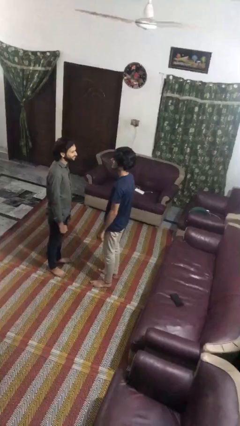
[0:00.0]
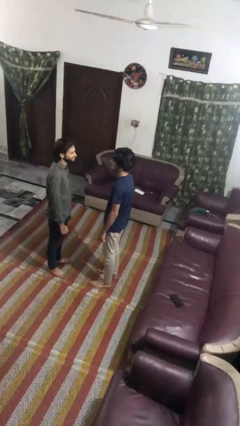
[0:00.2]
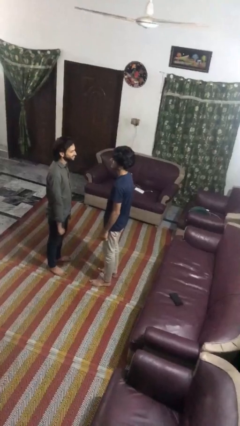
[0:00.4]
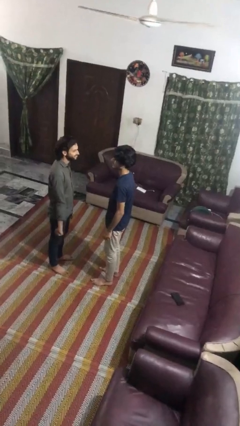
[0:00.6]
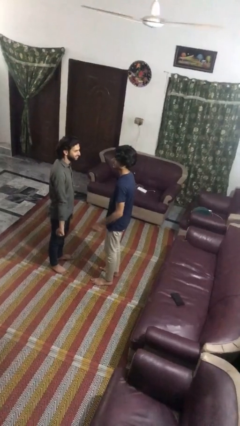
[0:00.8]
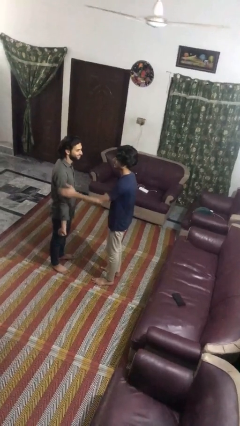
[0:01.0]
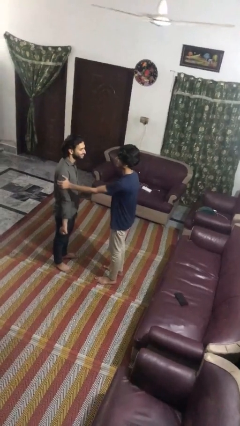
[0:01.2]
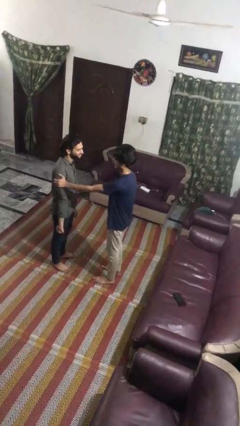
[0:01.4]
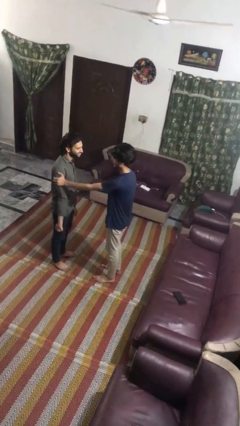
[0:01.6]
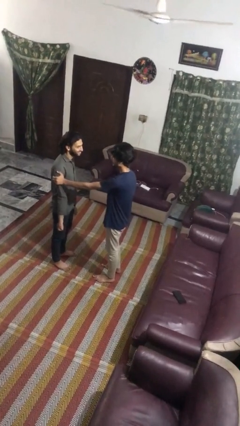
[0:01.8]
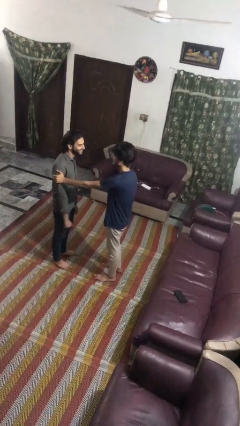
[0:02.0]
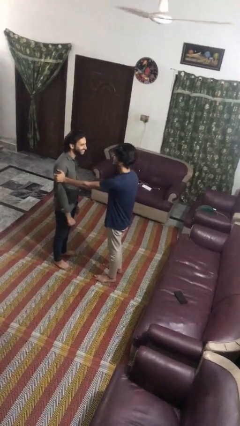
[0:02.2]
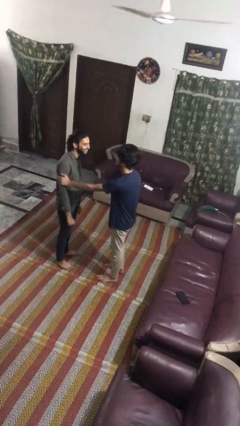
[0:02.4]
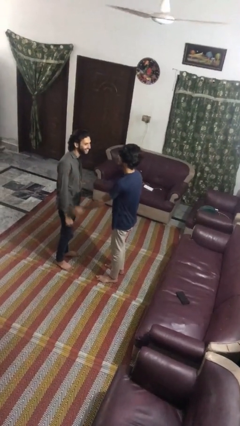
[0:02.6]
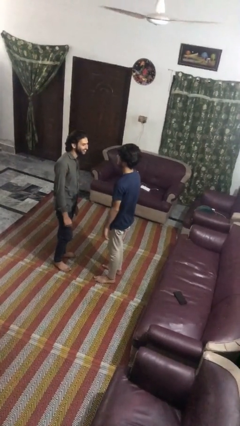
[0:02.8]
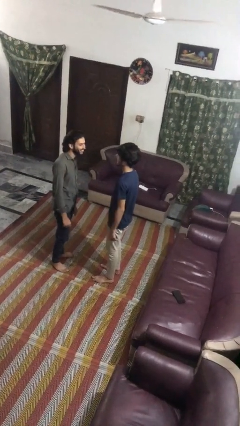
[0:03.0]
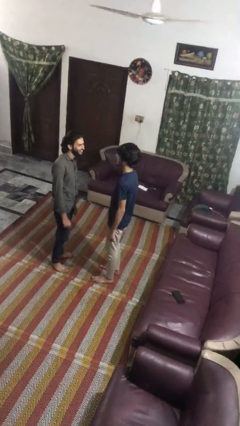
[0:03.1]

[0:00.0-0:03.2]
person grabs person by bicep

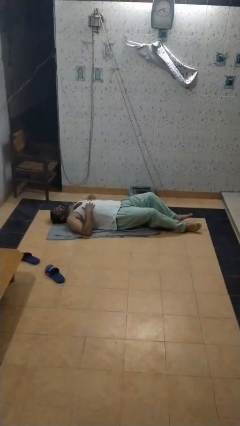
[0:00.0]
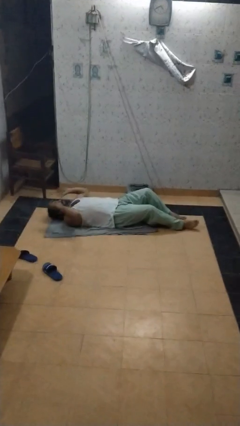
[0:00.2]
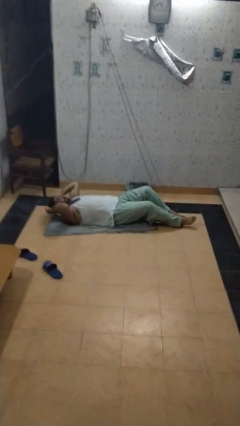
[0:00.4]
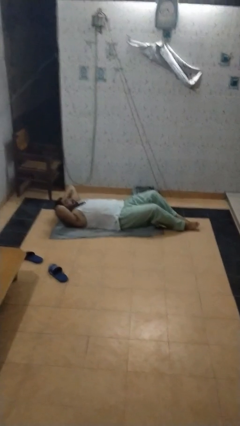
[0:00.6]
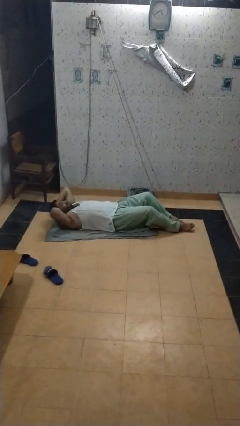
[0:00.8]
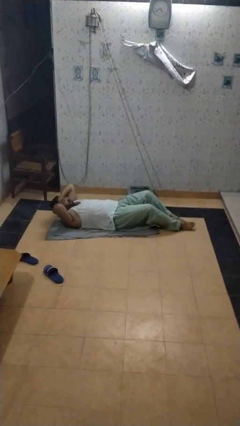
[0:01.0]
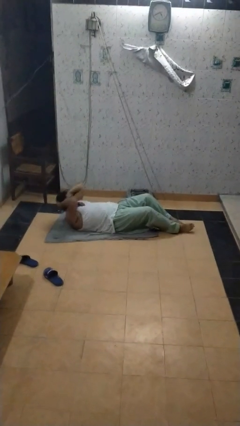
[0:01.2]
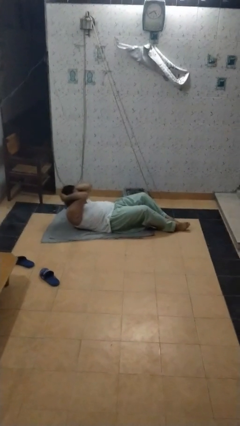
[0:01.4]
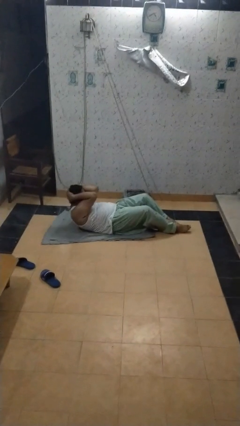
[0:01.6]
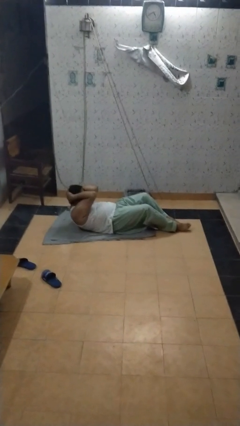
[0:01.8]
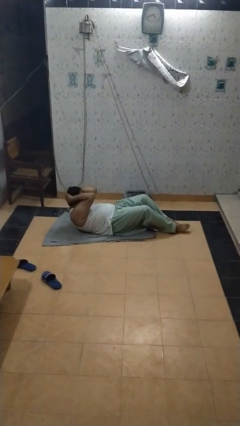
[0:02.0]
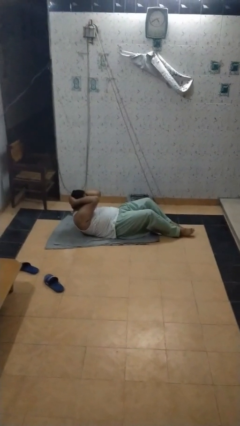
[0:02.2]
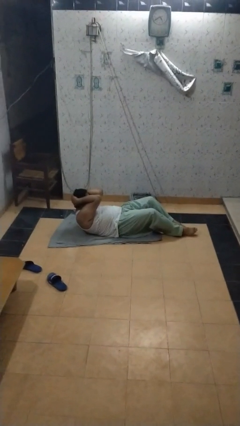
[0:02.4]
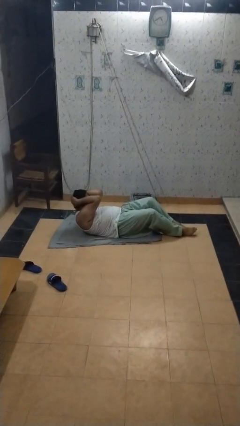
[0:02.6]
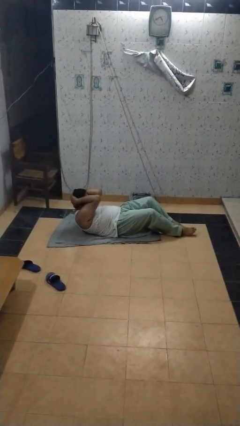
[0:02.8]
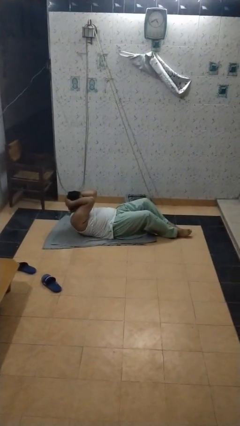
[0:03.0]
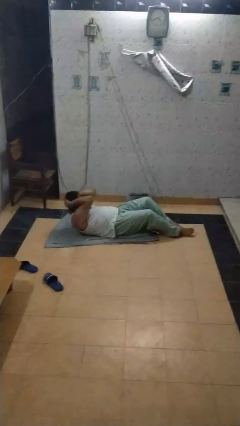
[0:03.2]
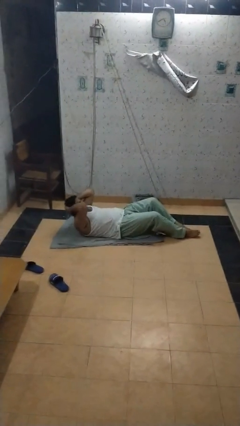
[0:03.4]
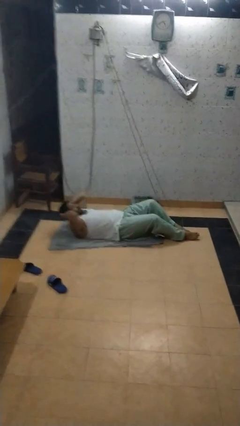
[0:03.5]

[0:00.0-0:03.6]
person exercises with situp

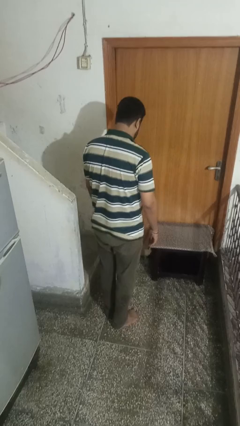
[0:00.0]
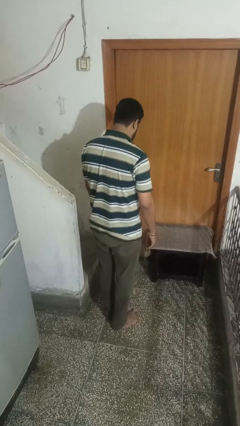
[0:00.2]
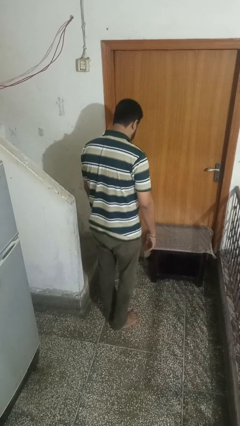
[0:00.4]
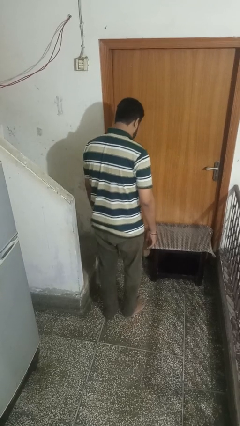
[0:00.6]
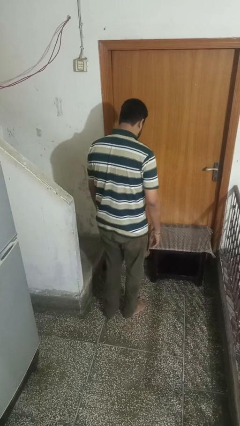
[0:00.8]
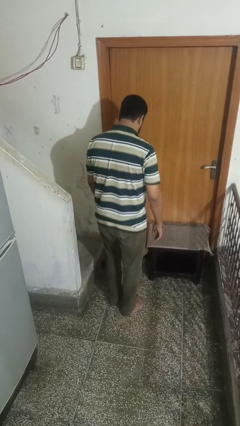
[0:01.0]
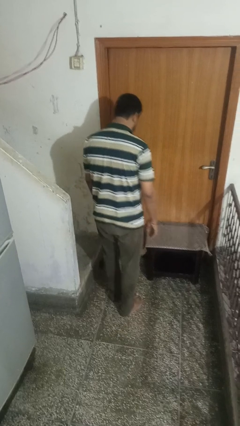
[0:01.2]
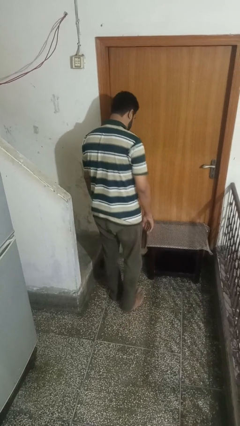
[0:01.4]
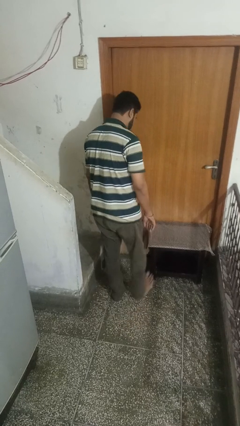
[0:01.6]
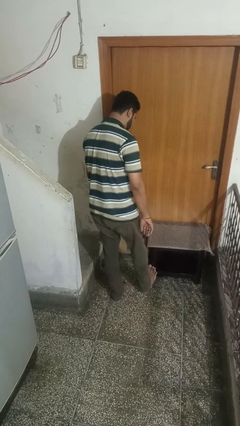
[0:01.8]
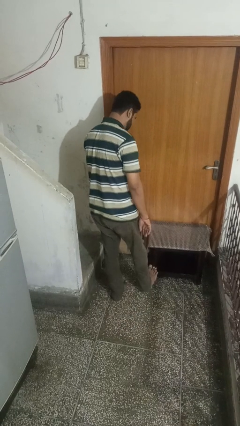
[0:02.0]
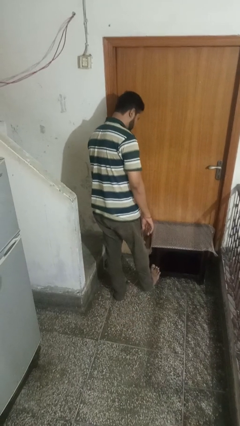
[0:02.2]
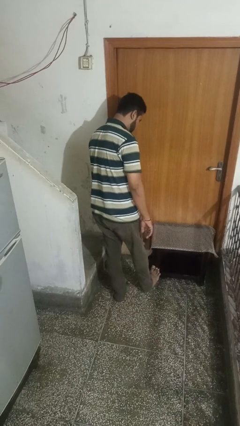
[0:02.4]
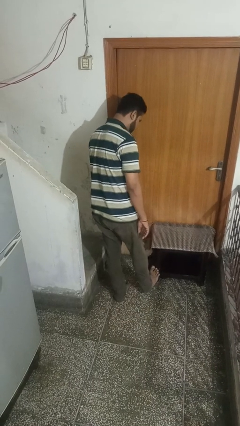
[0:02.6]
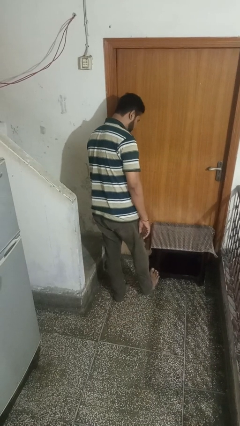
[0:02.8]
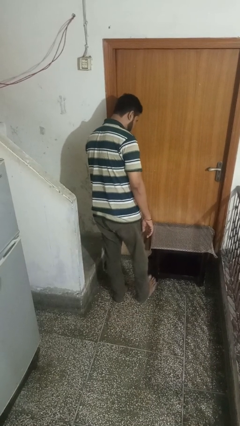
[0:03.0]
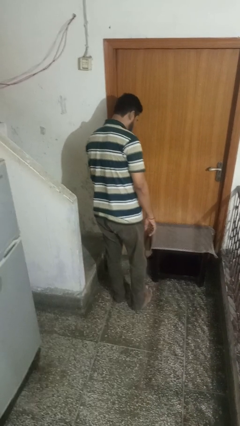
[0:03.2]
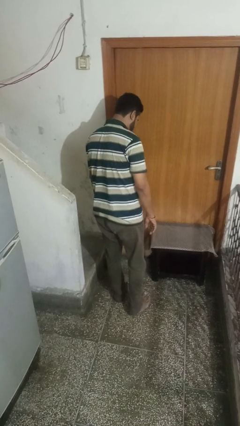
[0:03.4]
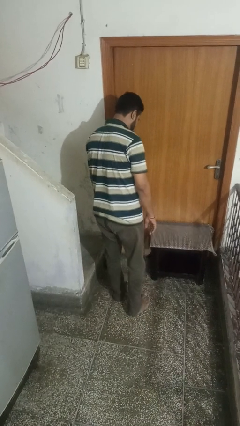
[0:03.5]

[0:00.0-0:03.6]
person stubs toe

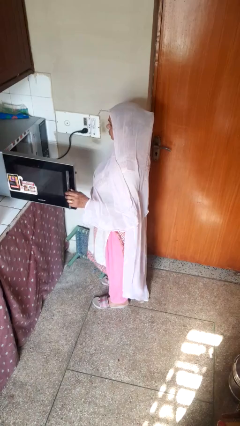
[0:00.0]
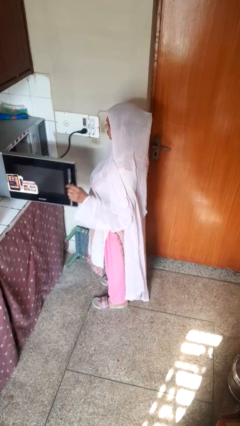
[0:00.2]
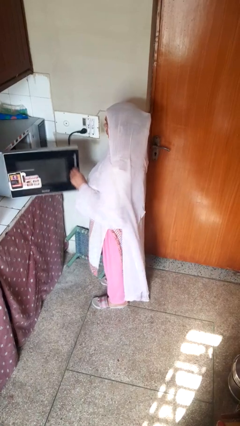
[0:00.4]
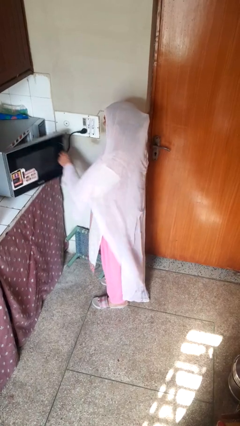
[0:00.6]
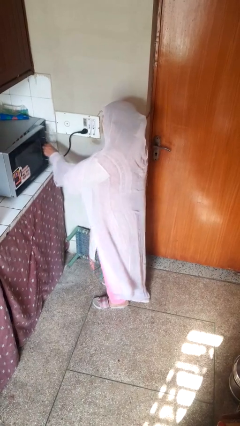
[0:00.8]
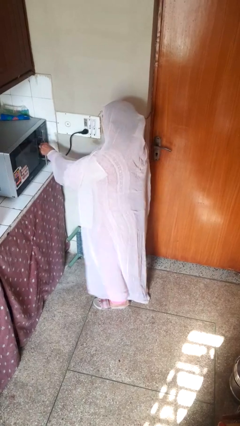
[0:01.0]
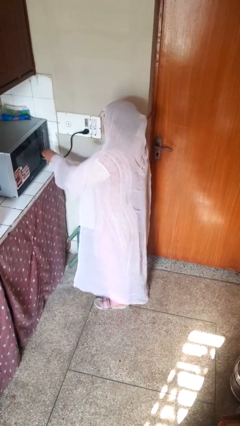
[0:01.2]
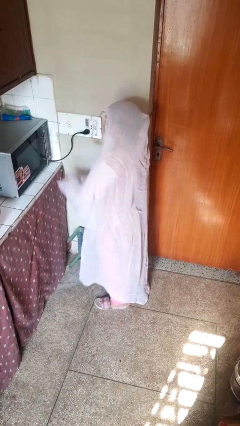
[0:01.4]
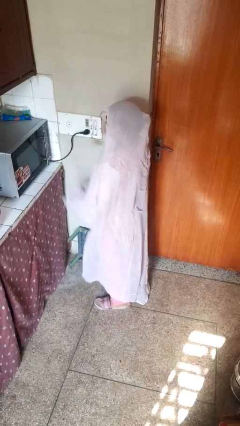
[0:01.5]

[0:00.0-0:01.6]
person closes oven door

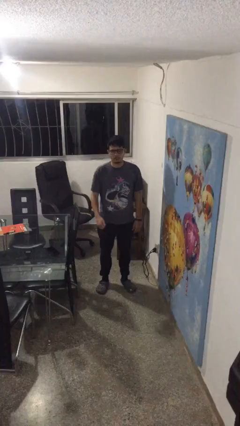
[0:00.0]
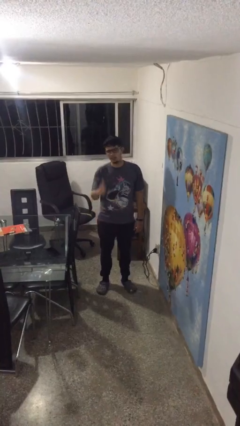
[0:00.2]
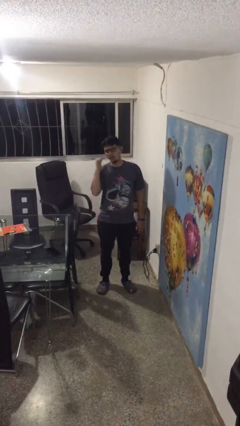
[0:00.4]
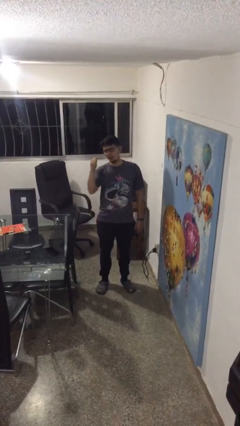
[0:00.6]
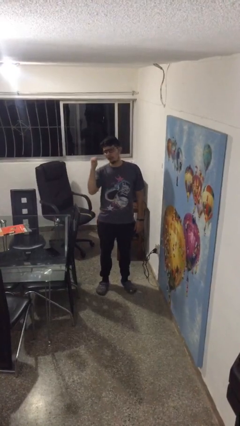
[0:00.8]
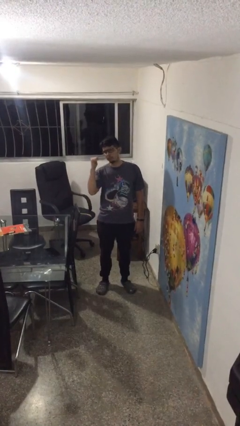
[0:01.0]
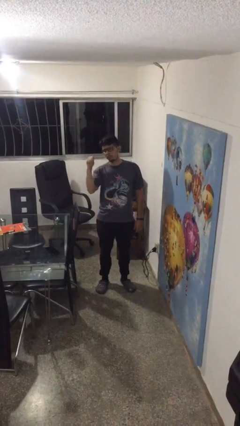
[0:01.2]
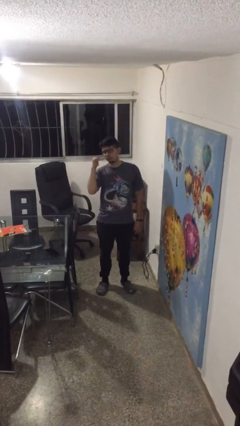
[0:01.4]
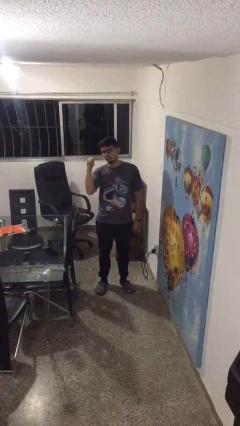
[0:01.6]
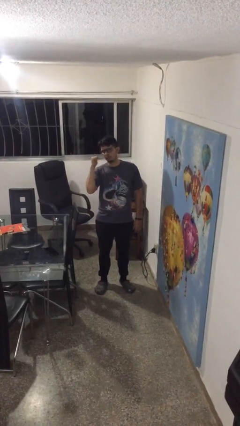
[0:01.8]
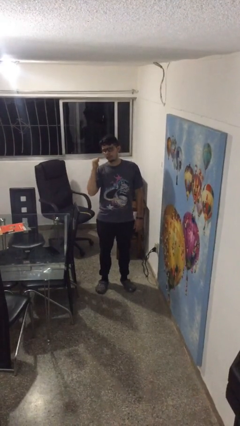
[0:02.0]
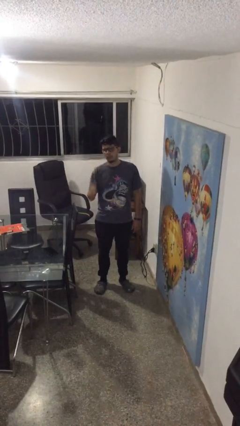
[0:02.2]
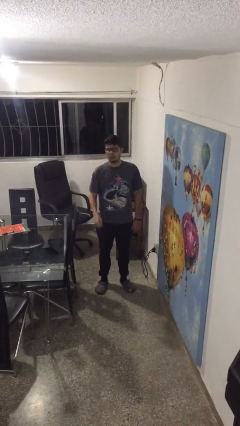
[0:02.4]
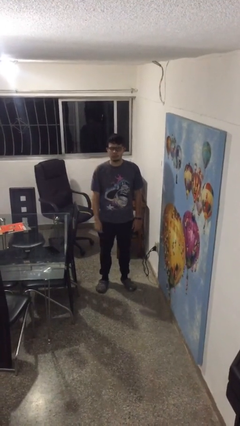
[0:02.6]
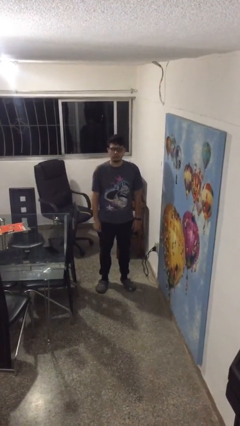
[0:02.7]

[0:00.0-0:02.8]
person gestures behind me

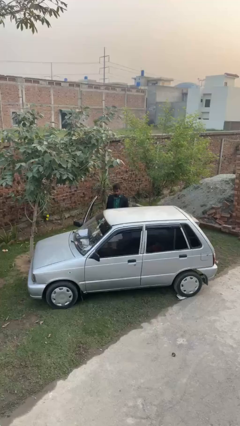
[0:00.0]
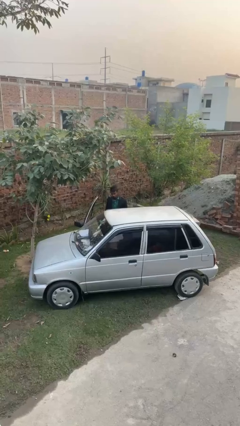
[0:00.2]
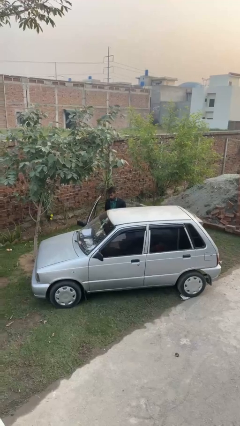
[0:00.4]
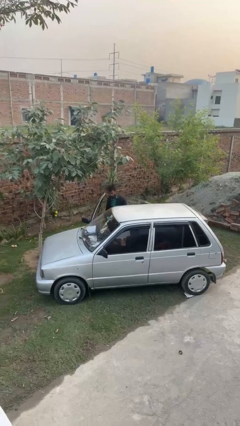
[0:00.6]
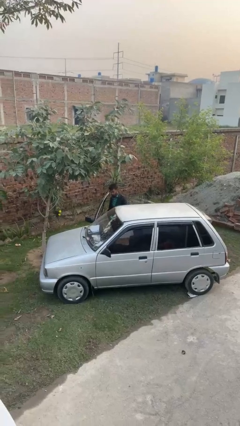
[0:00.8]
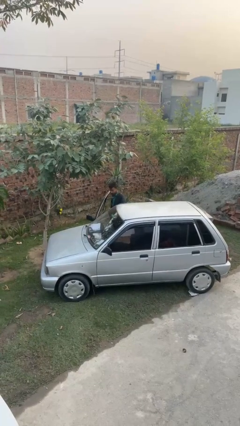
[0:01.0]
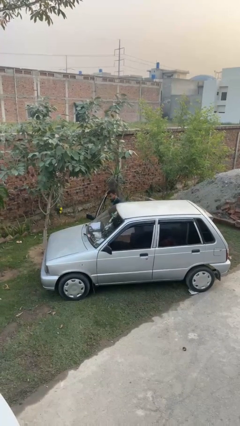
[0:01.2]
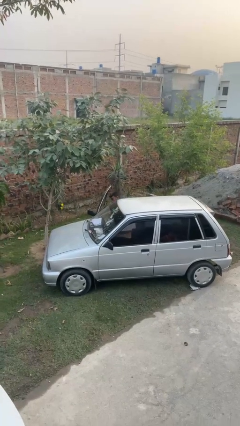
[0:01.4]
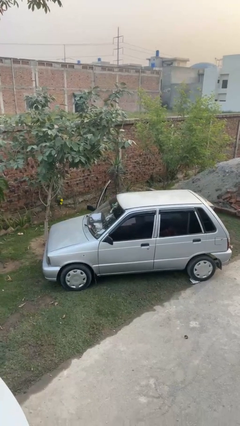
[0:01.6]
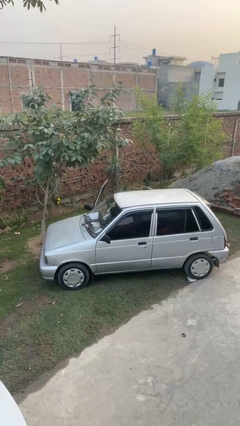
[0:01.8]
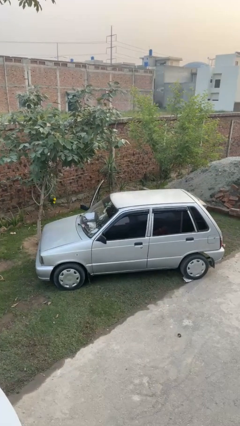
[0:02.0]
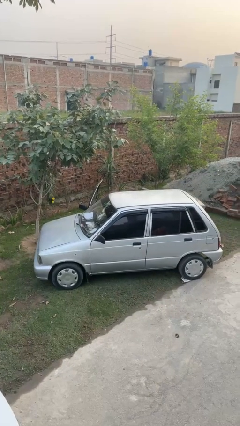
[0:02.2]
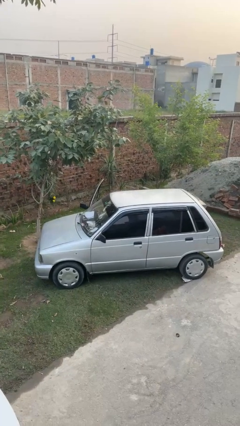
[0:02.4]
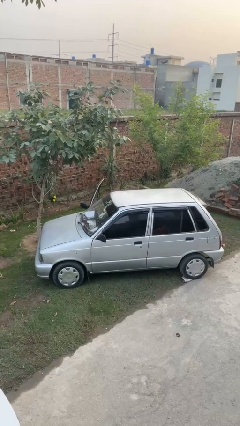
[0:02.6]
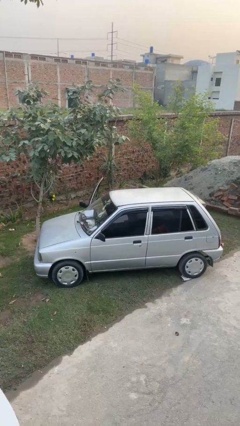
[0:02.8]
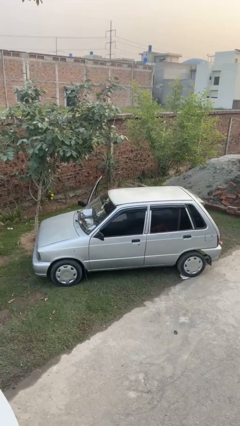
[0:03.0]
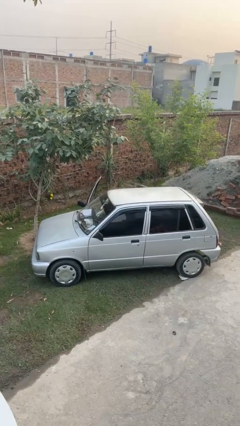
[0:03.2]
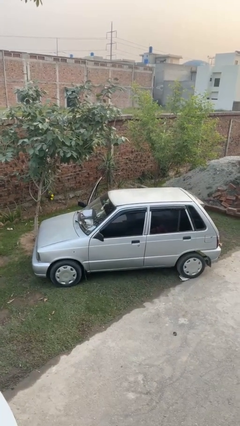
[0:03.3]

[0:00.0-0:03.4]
person enters car
